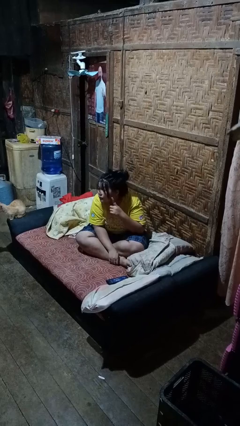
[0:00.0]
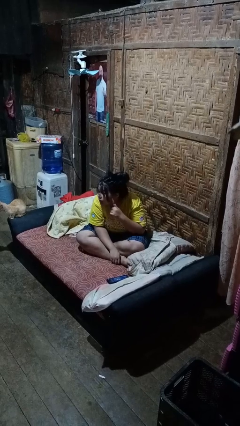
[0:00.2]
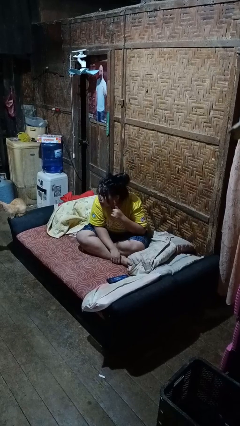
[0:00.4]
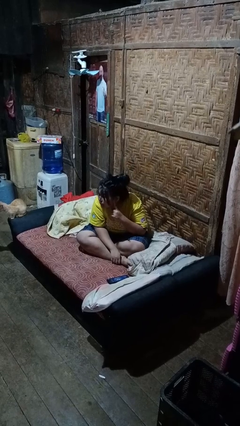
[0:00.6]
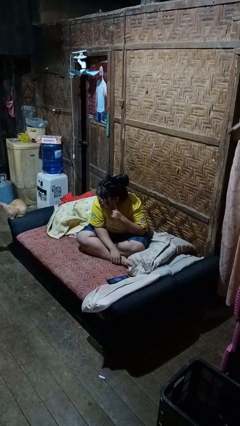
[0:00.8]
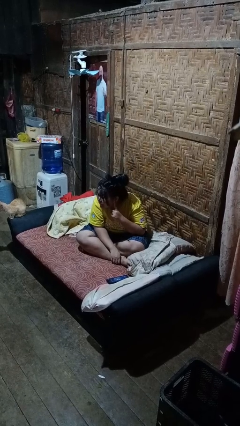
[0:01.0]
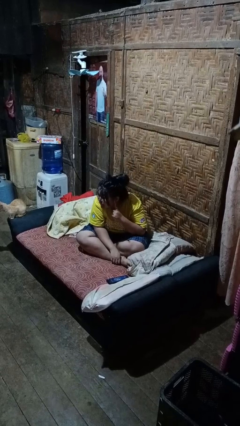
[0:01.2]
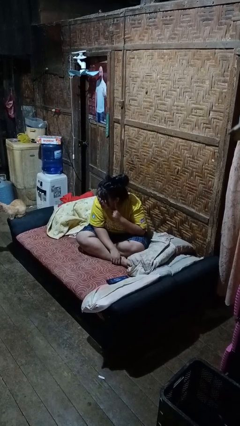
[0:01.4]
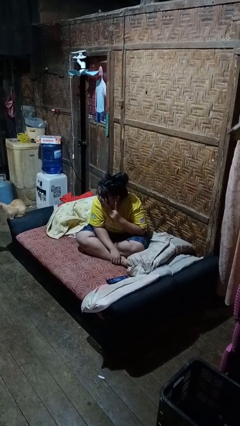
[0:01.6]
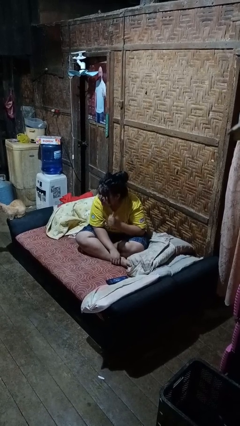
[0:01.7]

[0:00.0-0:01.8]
person gestures listen closely

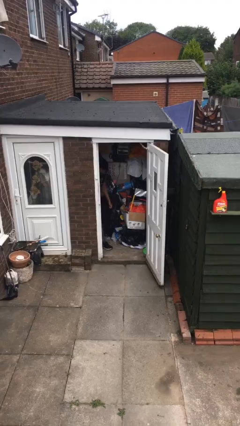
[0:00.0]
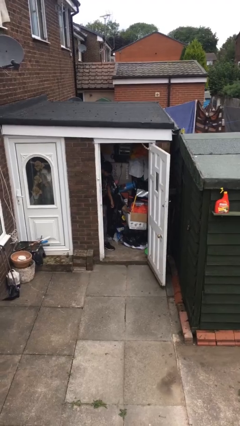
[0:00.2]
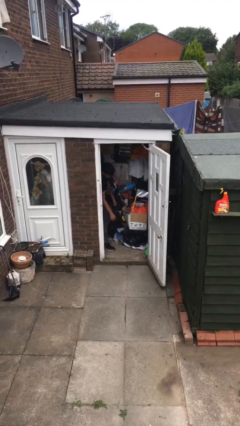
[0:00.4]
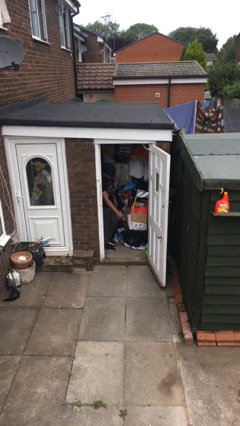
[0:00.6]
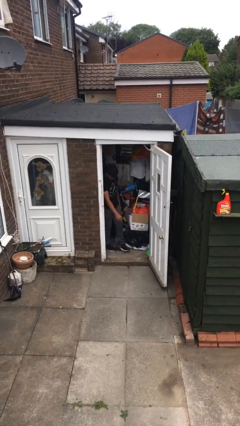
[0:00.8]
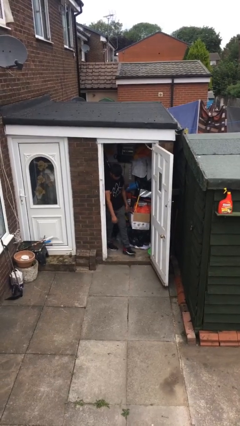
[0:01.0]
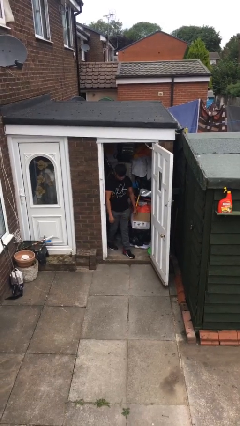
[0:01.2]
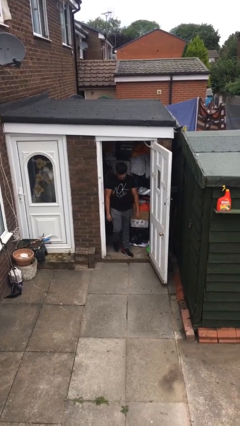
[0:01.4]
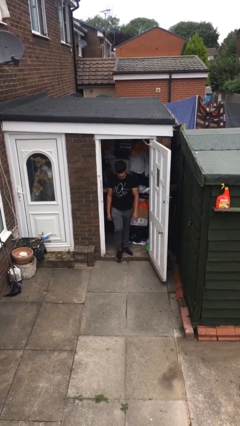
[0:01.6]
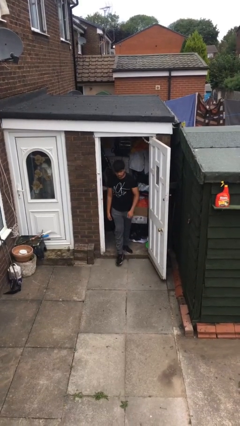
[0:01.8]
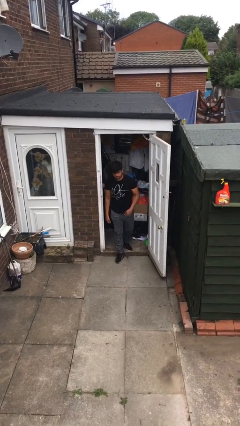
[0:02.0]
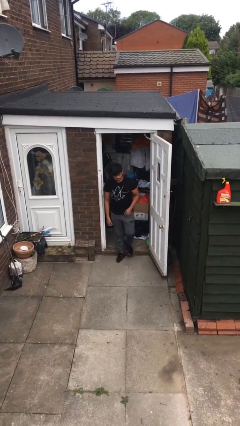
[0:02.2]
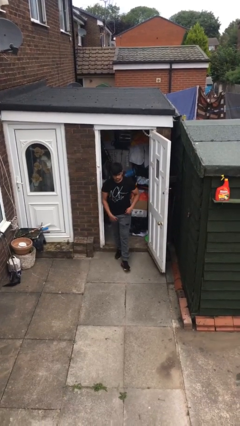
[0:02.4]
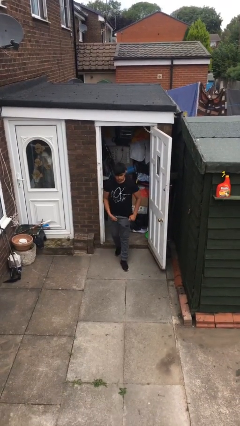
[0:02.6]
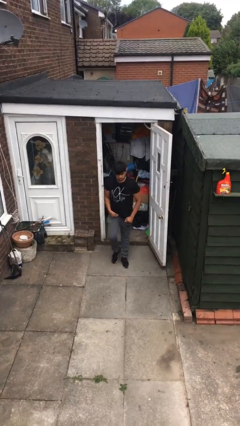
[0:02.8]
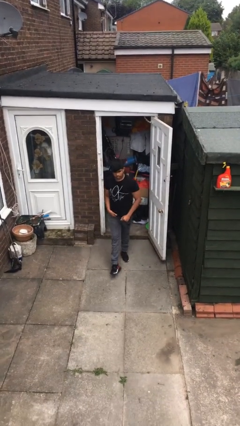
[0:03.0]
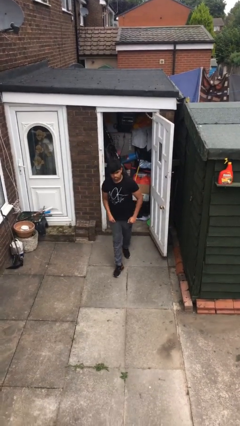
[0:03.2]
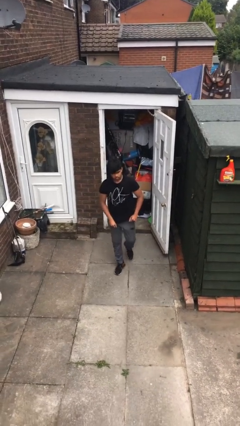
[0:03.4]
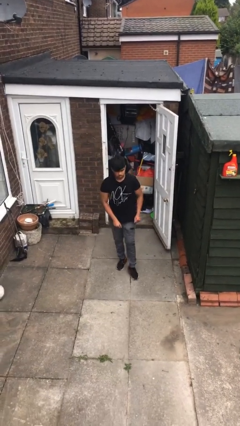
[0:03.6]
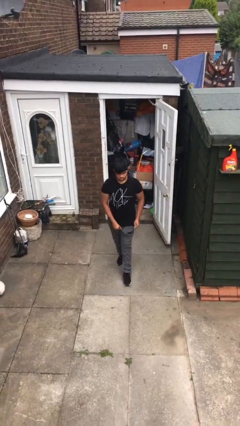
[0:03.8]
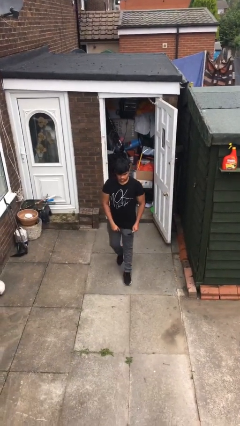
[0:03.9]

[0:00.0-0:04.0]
person enters scene through structure

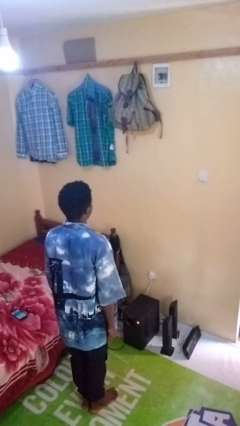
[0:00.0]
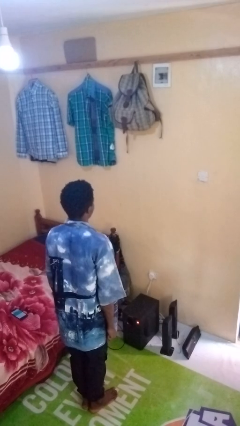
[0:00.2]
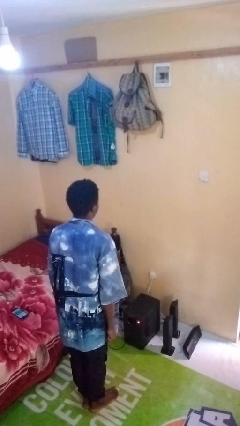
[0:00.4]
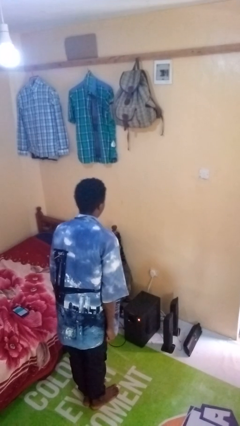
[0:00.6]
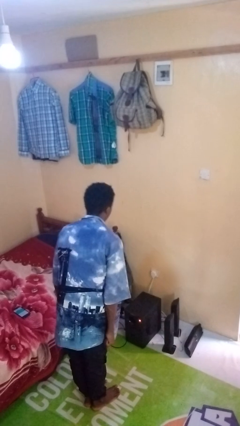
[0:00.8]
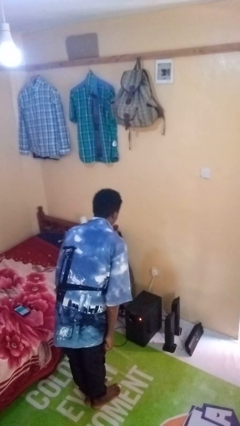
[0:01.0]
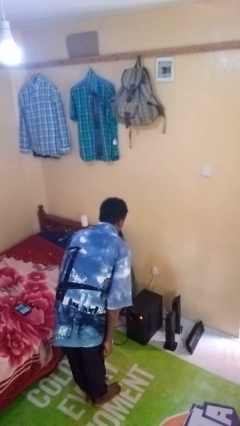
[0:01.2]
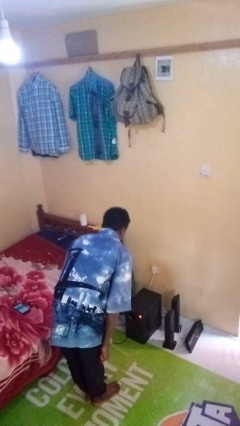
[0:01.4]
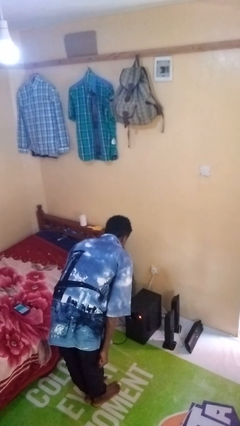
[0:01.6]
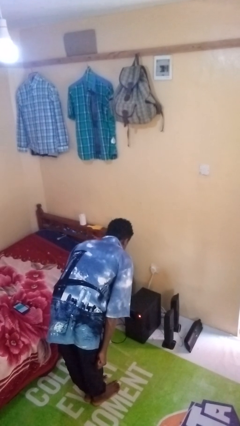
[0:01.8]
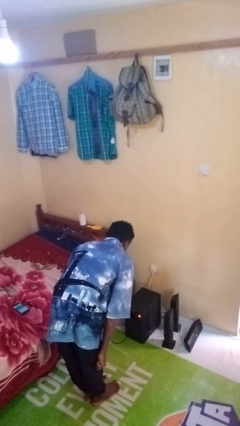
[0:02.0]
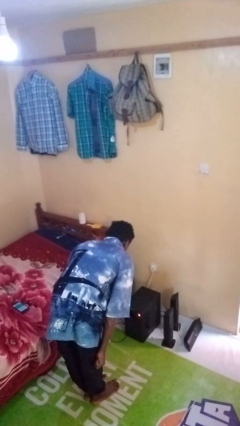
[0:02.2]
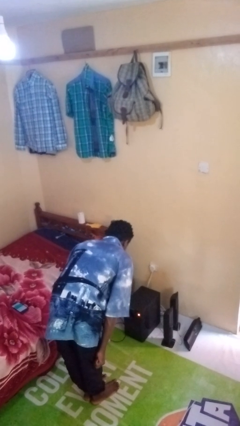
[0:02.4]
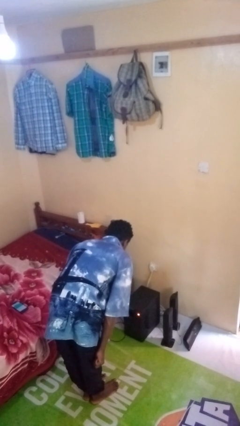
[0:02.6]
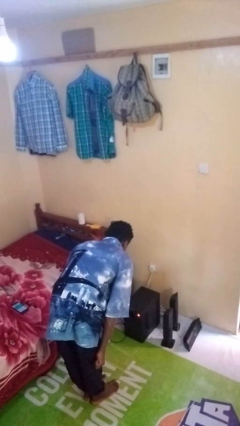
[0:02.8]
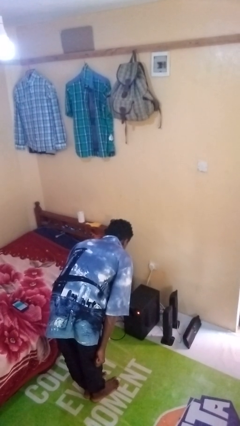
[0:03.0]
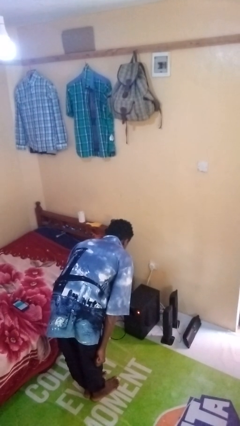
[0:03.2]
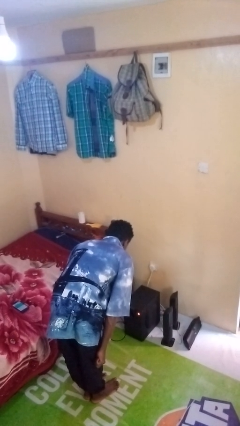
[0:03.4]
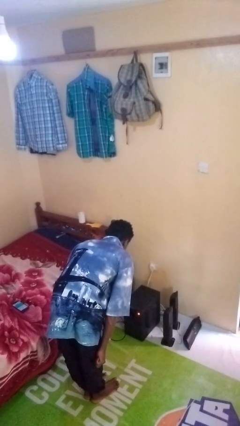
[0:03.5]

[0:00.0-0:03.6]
person bows

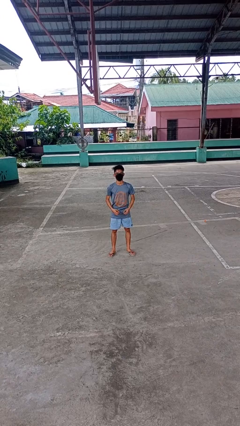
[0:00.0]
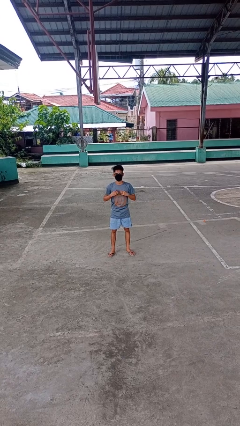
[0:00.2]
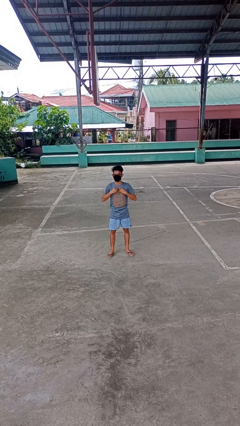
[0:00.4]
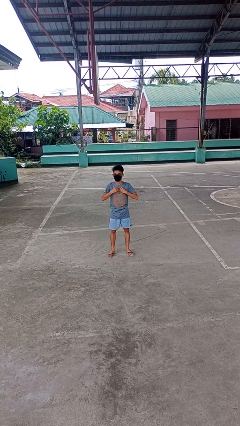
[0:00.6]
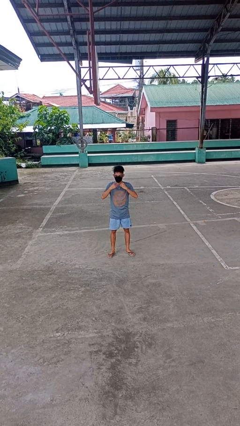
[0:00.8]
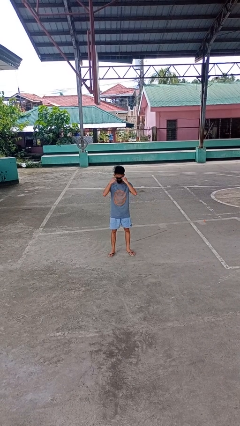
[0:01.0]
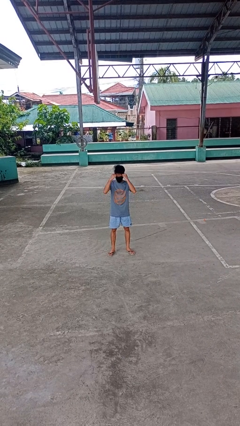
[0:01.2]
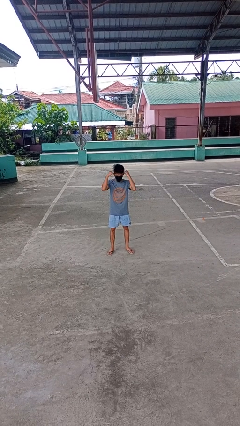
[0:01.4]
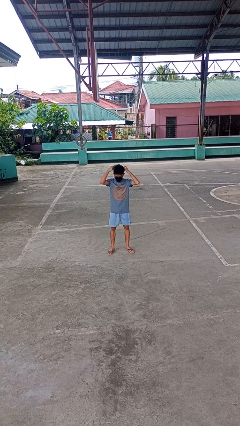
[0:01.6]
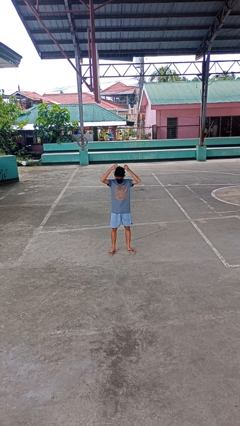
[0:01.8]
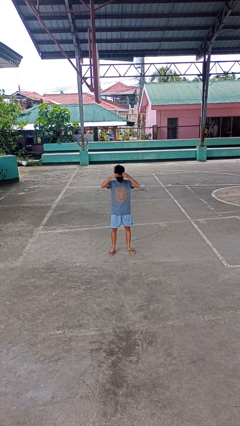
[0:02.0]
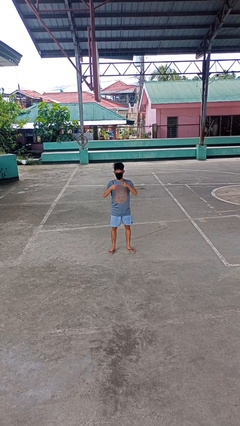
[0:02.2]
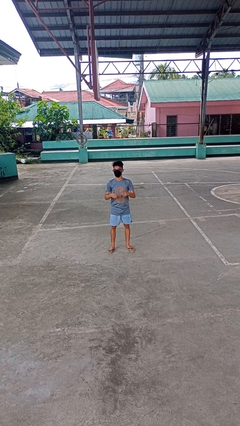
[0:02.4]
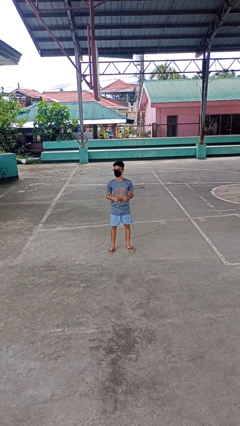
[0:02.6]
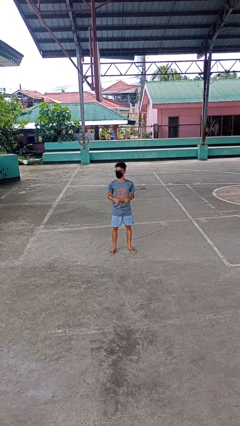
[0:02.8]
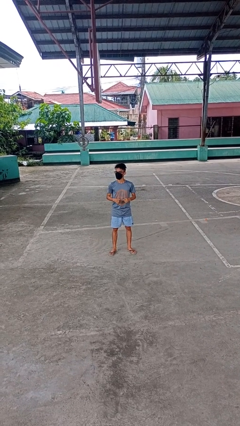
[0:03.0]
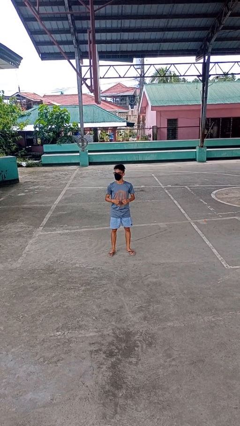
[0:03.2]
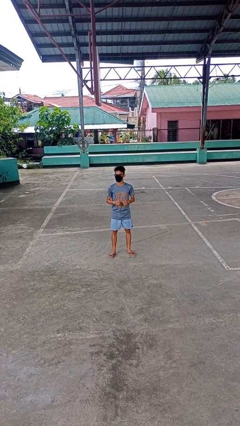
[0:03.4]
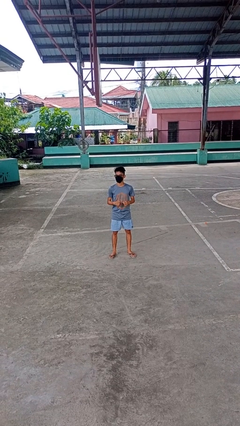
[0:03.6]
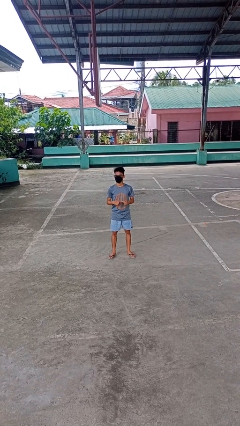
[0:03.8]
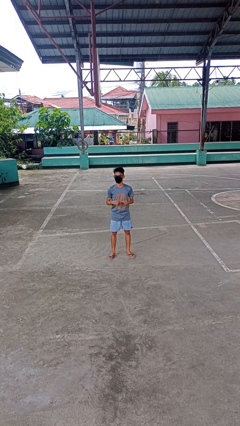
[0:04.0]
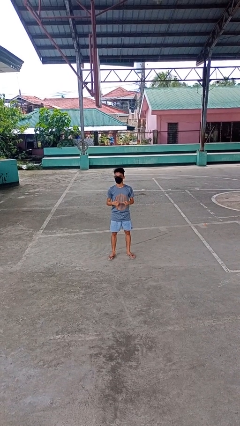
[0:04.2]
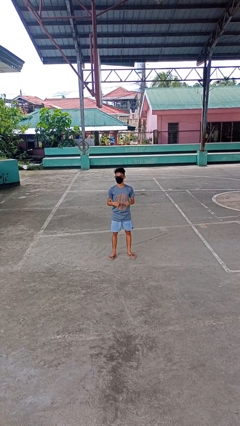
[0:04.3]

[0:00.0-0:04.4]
person takes off necklace

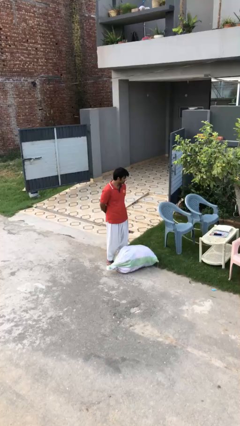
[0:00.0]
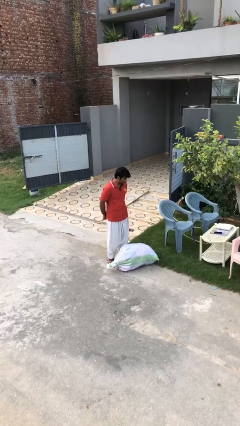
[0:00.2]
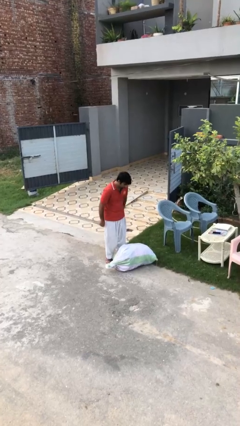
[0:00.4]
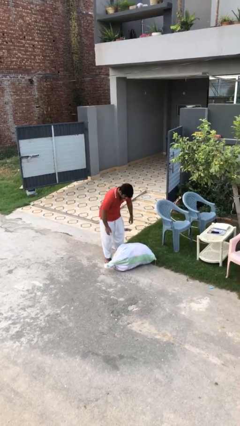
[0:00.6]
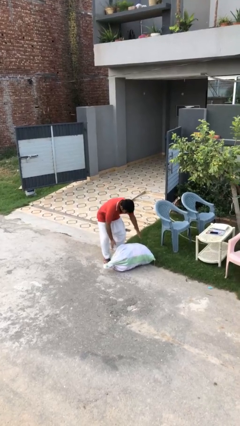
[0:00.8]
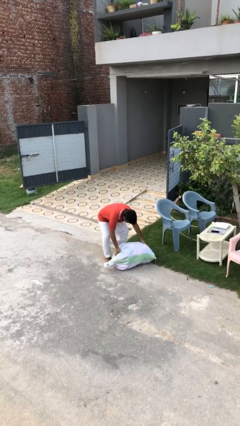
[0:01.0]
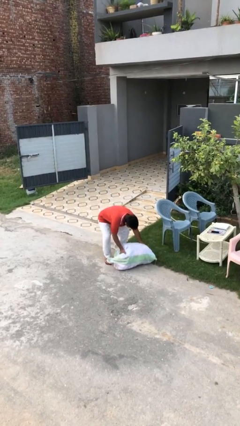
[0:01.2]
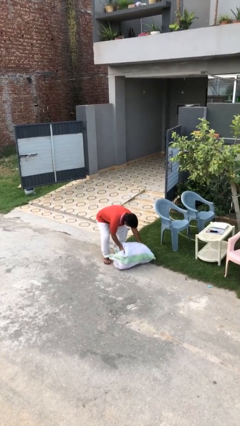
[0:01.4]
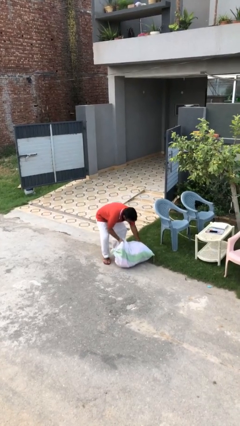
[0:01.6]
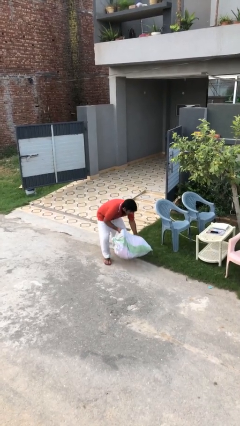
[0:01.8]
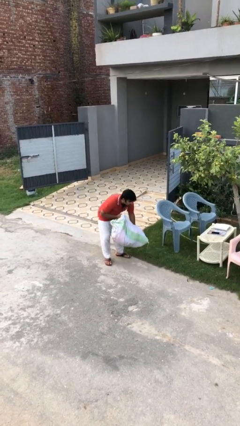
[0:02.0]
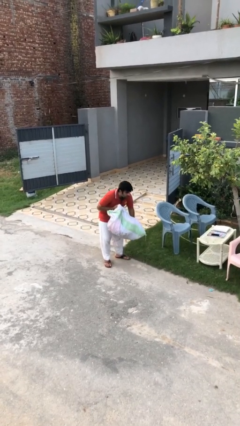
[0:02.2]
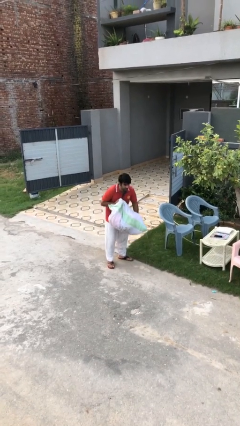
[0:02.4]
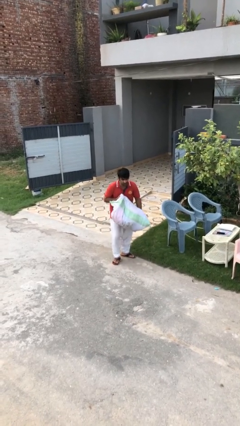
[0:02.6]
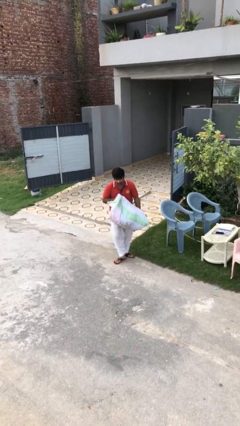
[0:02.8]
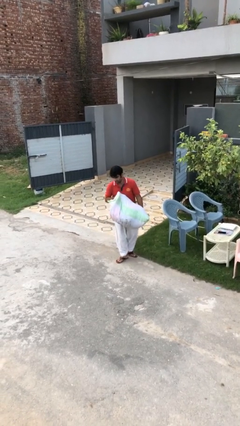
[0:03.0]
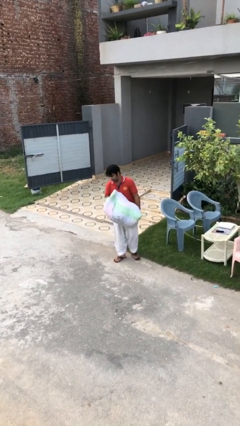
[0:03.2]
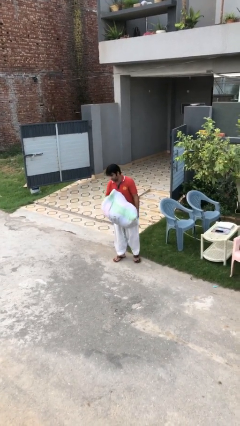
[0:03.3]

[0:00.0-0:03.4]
person picks up object from floor
